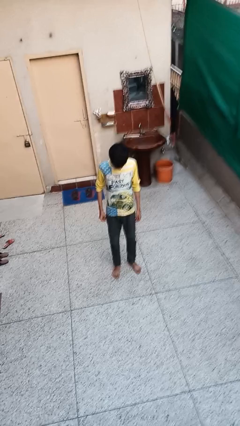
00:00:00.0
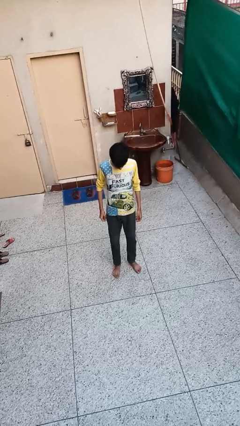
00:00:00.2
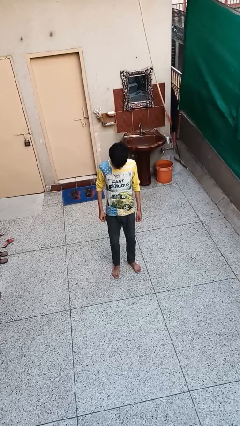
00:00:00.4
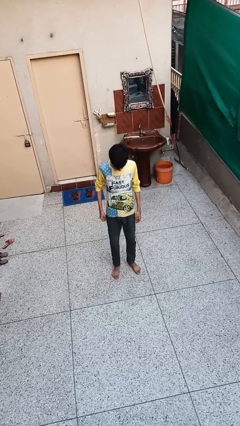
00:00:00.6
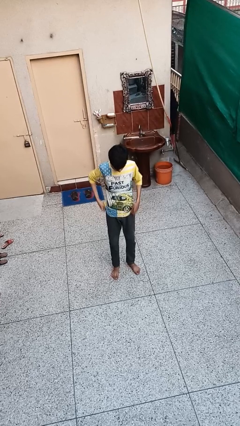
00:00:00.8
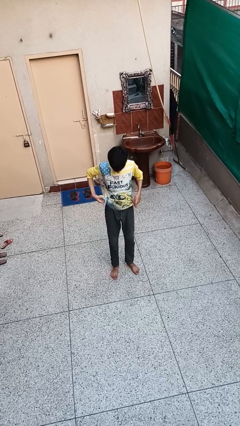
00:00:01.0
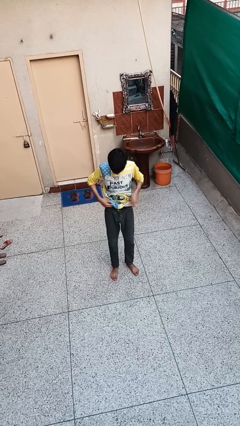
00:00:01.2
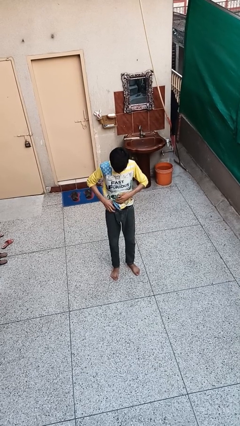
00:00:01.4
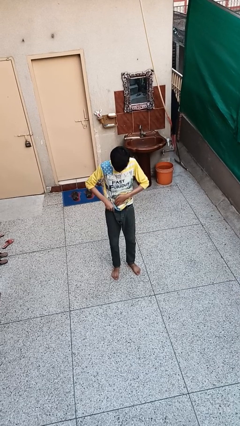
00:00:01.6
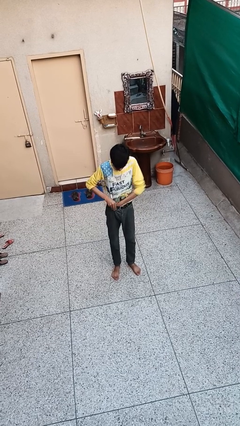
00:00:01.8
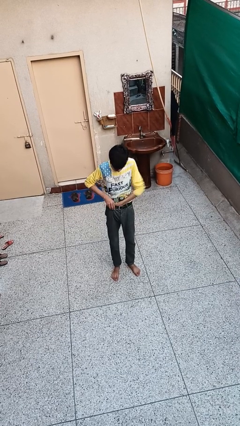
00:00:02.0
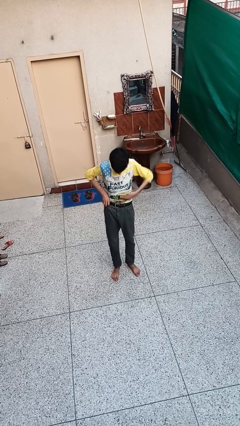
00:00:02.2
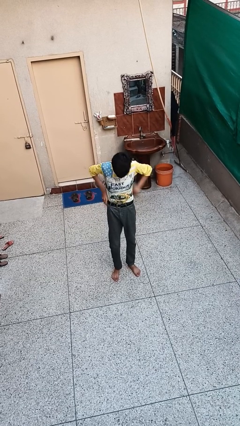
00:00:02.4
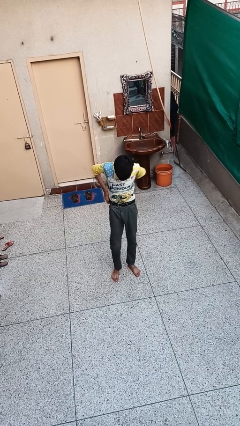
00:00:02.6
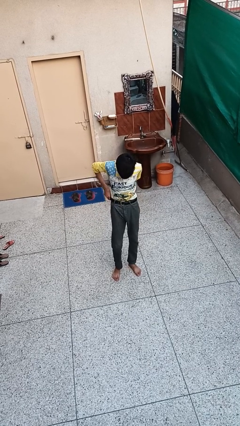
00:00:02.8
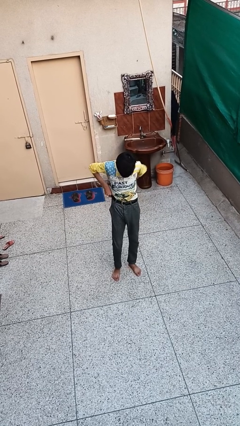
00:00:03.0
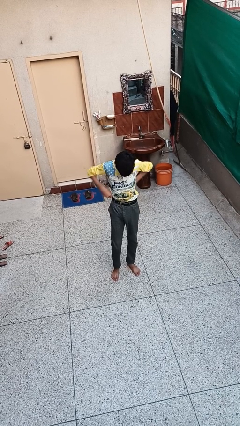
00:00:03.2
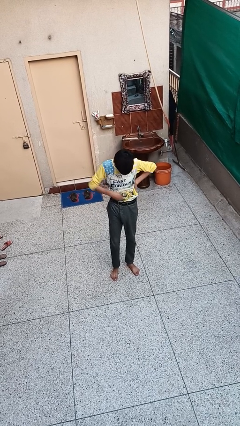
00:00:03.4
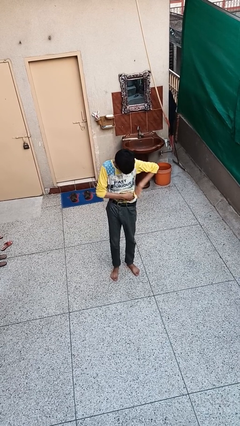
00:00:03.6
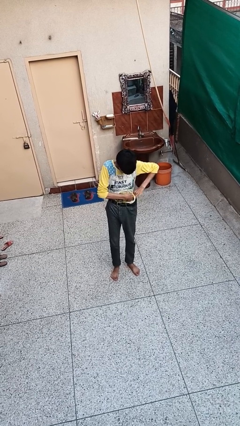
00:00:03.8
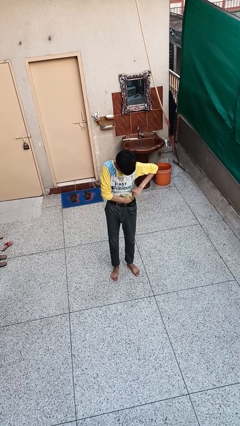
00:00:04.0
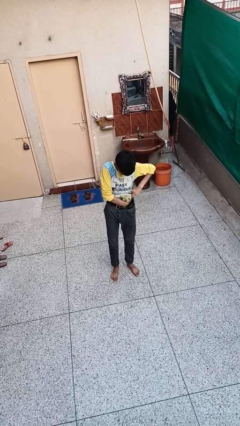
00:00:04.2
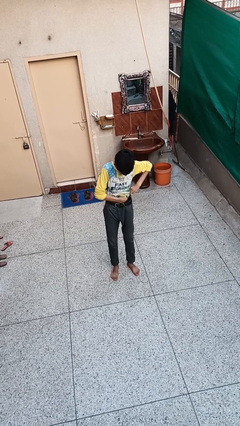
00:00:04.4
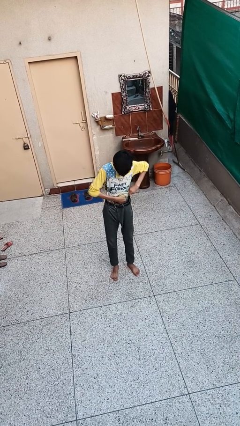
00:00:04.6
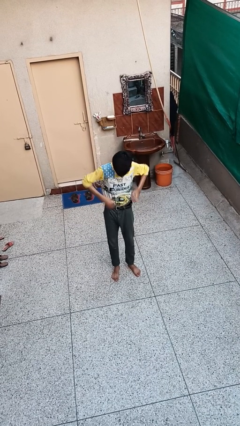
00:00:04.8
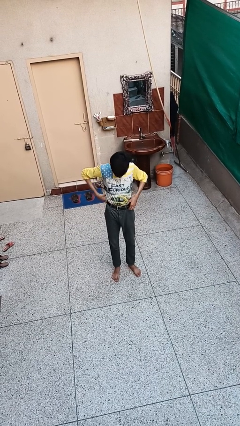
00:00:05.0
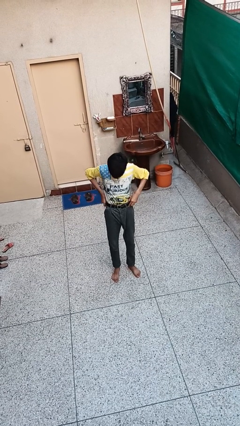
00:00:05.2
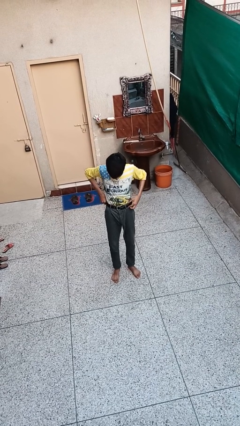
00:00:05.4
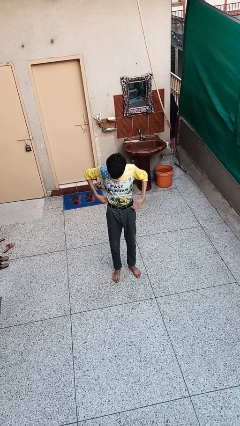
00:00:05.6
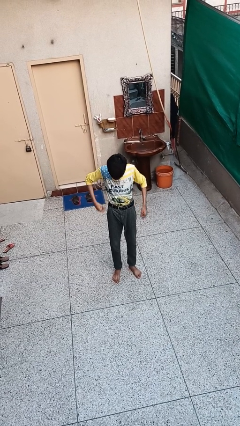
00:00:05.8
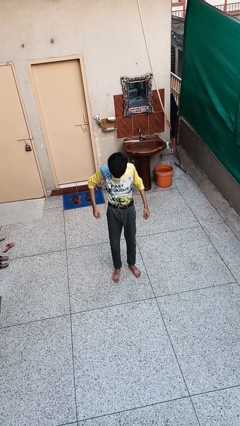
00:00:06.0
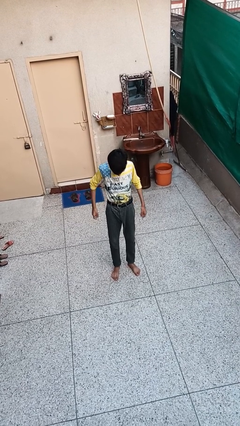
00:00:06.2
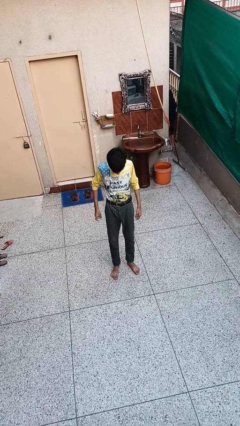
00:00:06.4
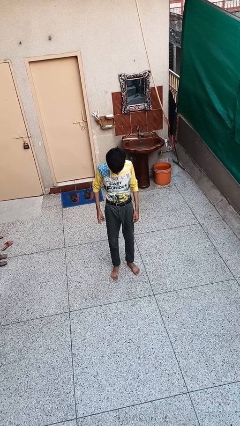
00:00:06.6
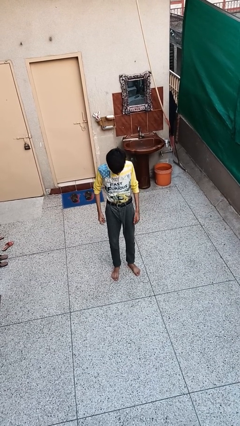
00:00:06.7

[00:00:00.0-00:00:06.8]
person tucks in shirt

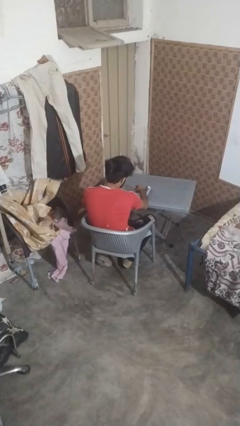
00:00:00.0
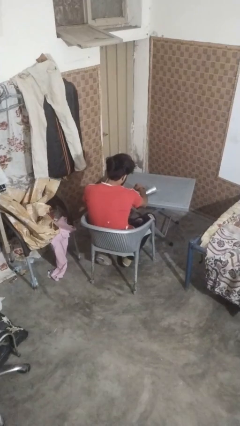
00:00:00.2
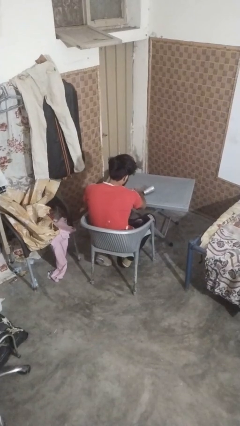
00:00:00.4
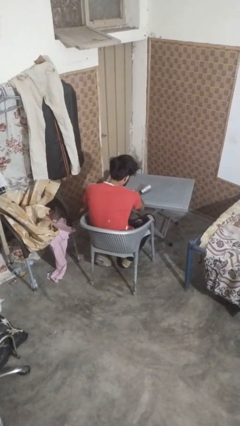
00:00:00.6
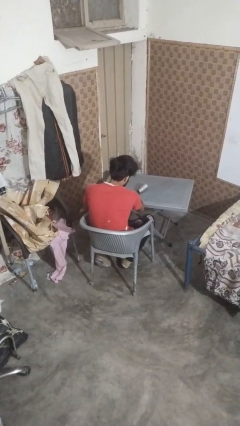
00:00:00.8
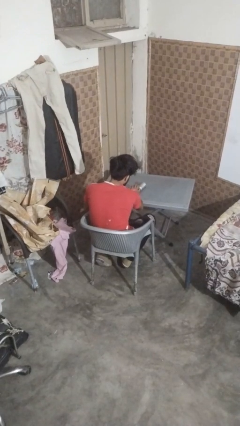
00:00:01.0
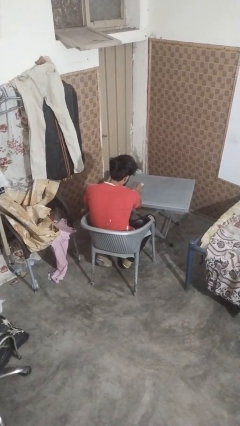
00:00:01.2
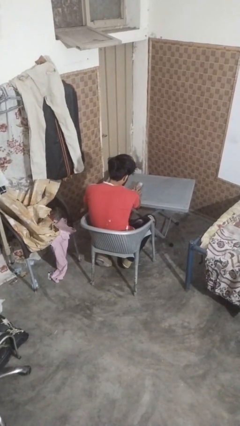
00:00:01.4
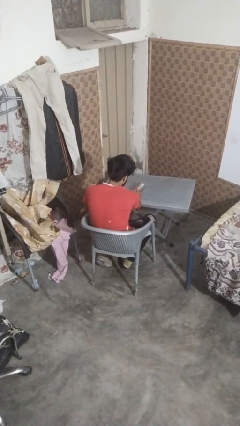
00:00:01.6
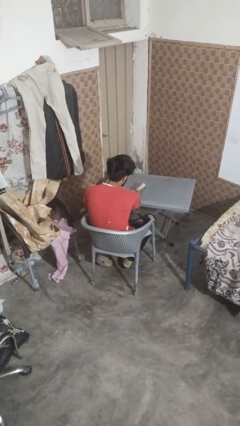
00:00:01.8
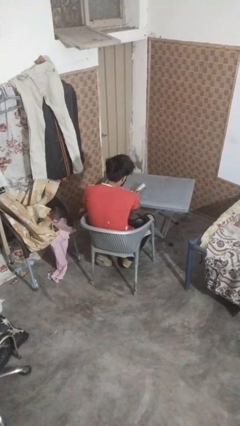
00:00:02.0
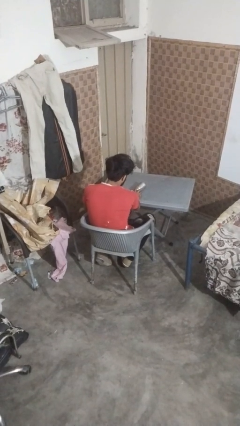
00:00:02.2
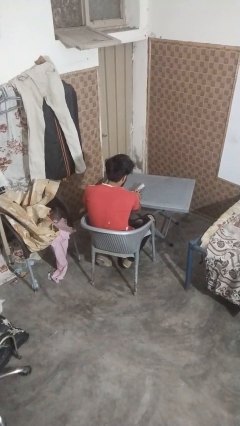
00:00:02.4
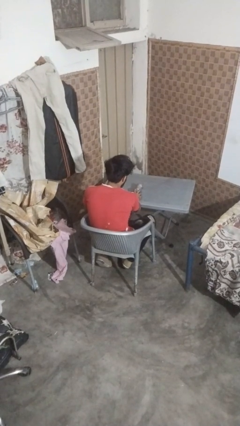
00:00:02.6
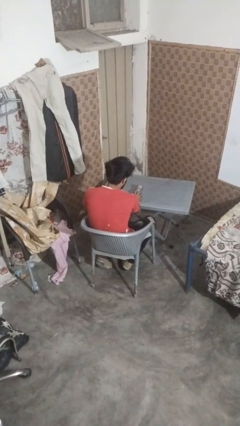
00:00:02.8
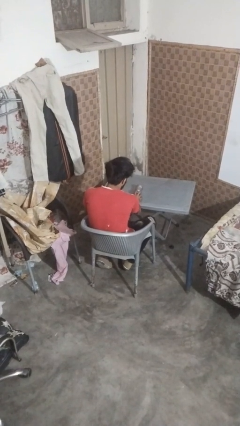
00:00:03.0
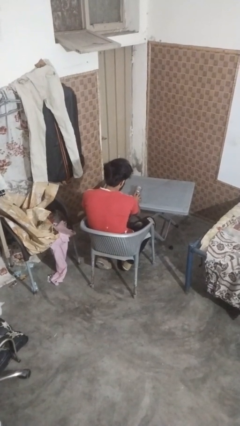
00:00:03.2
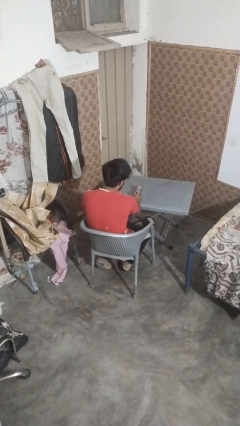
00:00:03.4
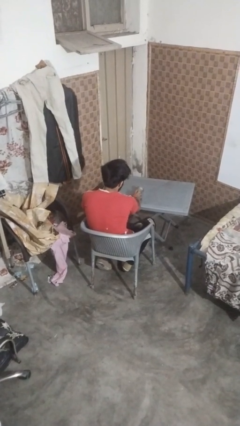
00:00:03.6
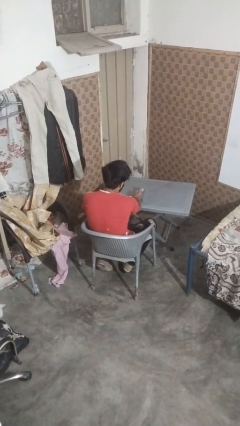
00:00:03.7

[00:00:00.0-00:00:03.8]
person spills on table

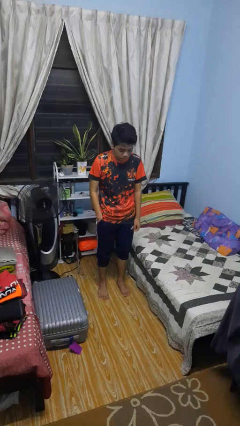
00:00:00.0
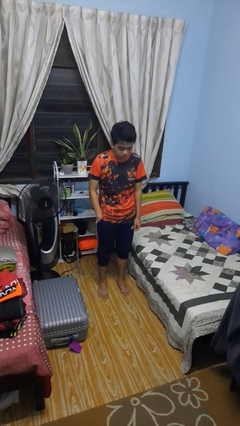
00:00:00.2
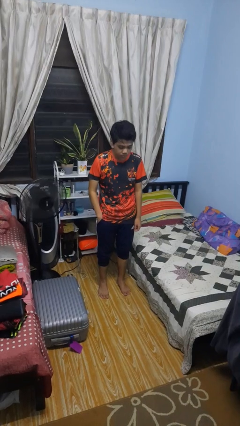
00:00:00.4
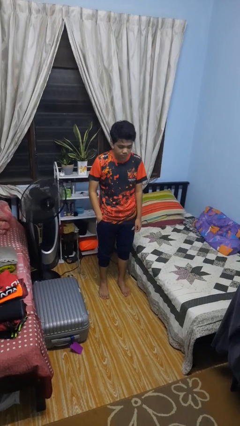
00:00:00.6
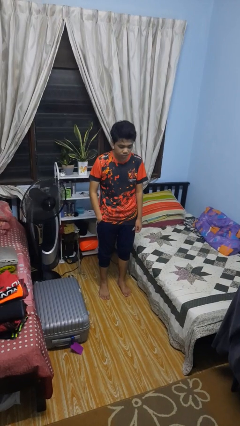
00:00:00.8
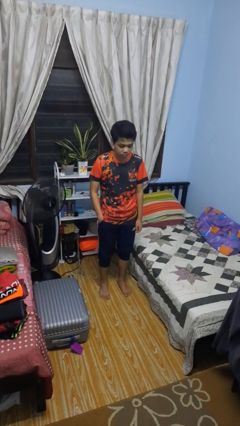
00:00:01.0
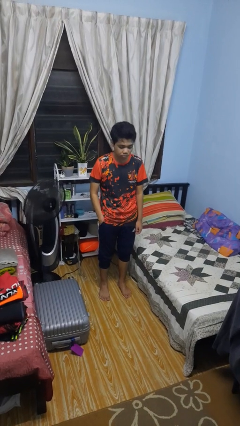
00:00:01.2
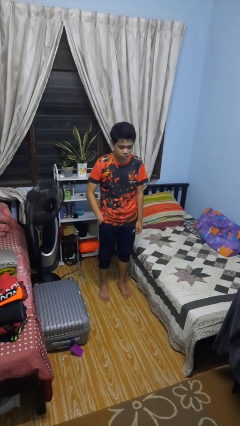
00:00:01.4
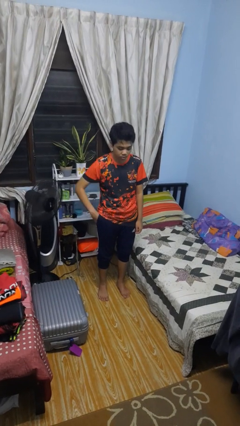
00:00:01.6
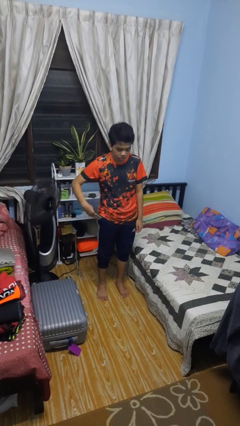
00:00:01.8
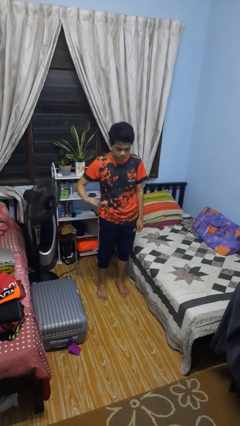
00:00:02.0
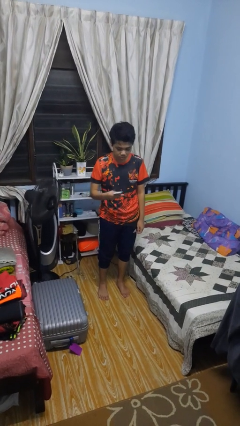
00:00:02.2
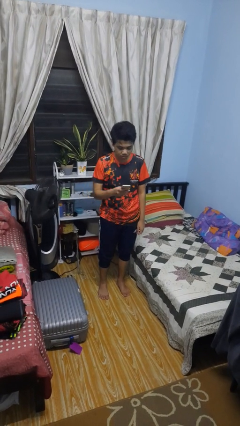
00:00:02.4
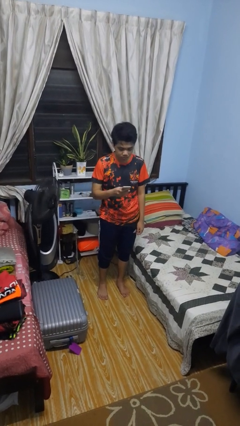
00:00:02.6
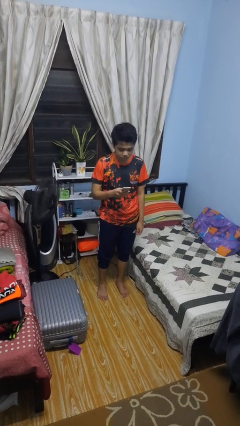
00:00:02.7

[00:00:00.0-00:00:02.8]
person takes phone from pocket

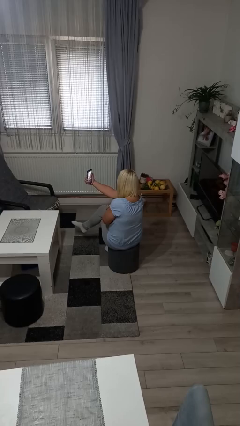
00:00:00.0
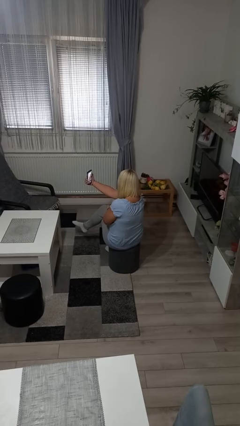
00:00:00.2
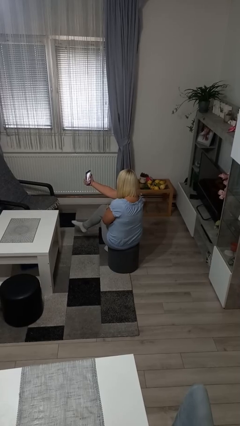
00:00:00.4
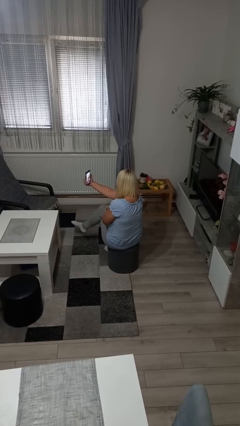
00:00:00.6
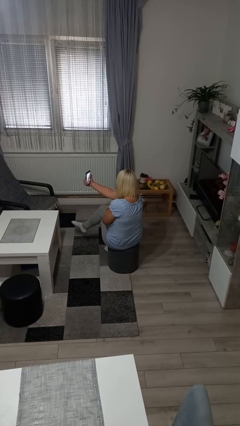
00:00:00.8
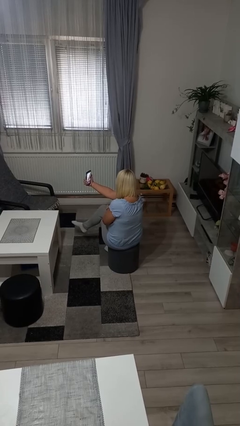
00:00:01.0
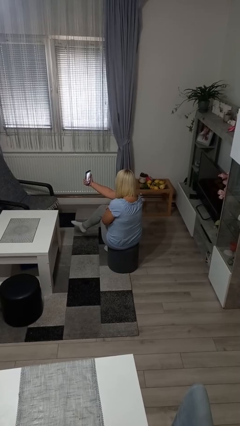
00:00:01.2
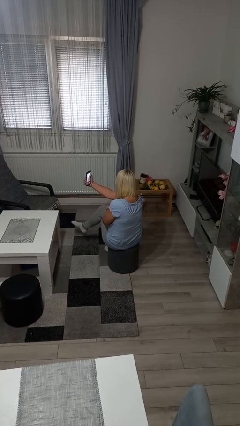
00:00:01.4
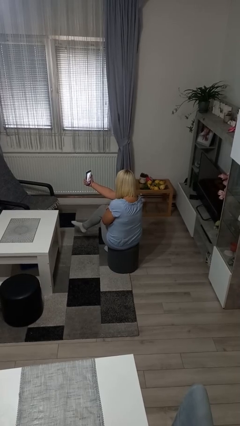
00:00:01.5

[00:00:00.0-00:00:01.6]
person takes selfie

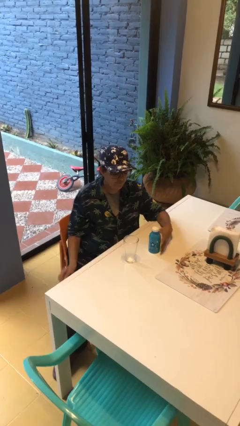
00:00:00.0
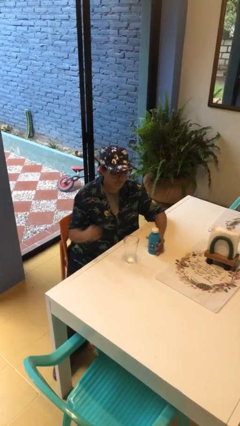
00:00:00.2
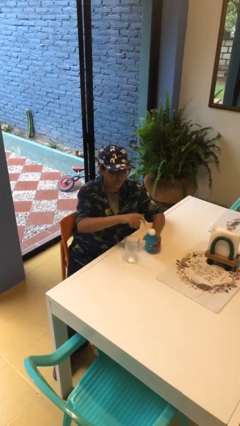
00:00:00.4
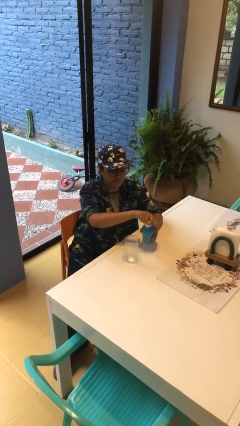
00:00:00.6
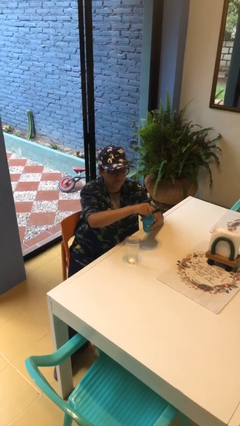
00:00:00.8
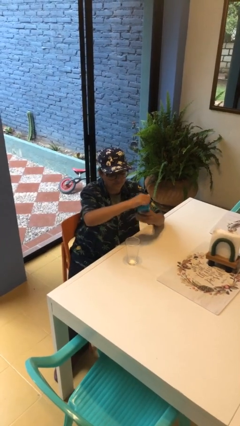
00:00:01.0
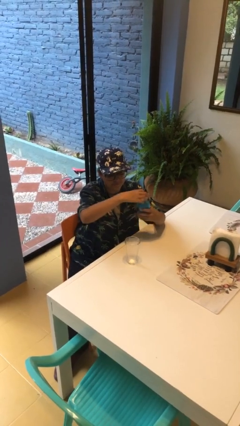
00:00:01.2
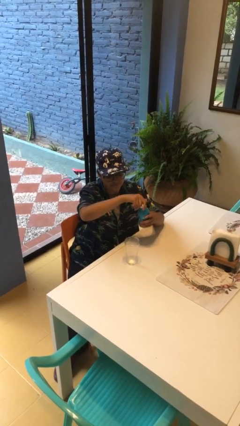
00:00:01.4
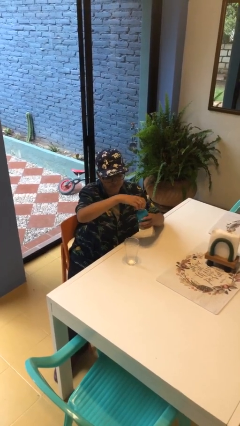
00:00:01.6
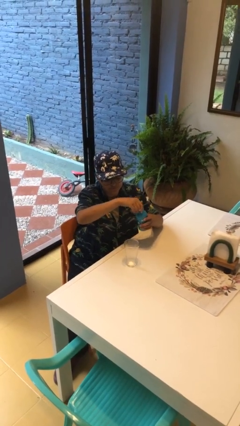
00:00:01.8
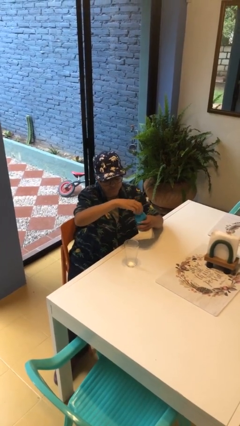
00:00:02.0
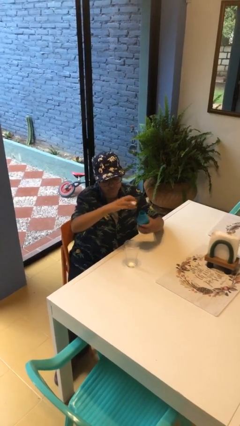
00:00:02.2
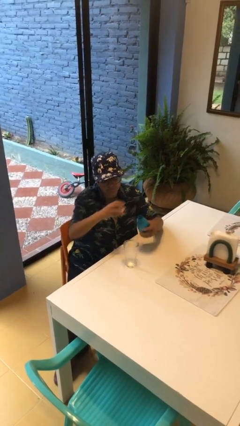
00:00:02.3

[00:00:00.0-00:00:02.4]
person unscrews lid from bottle
